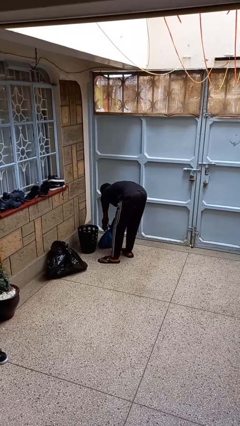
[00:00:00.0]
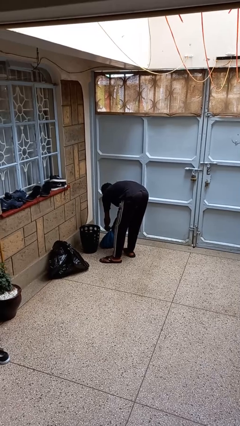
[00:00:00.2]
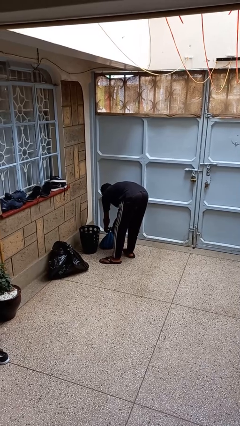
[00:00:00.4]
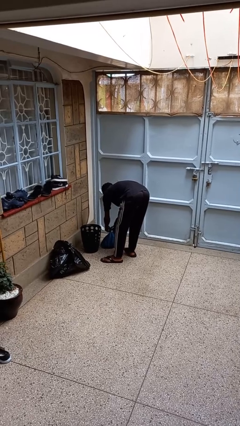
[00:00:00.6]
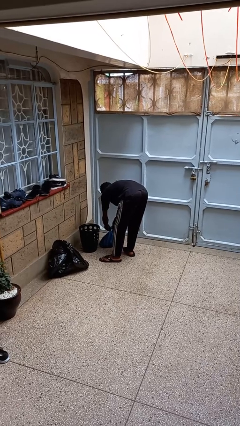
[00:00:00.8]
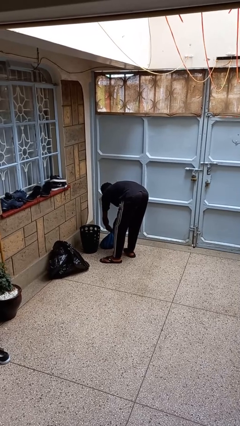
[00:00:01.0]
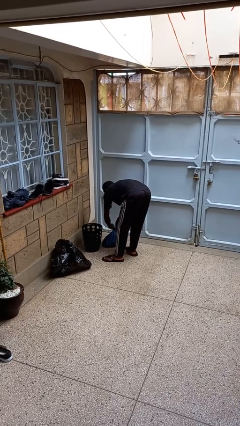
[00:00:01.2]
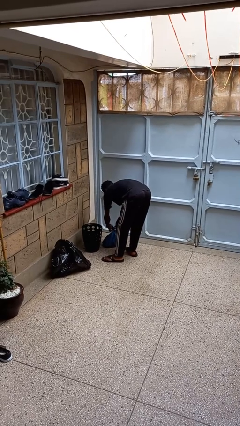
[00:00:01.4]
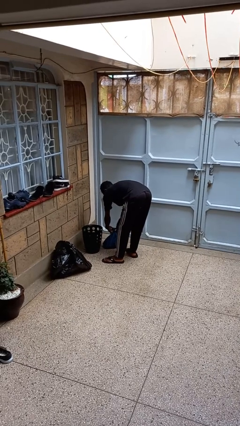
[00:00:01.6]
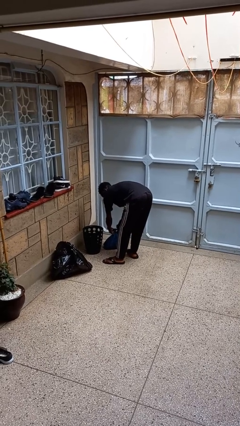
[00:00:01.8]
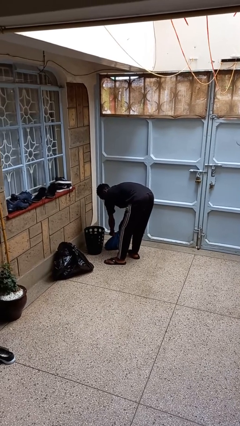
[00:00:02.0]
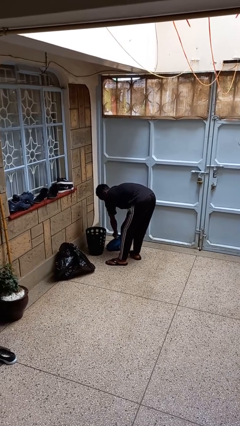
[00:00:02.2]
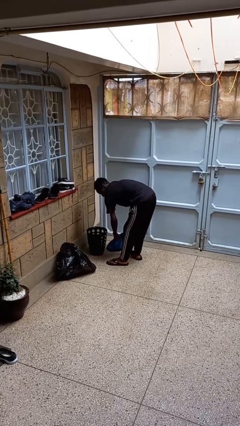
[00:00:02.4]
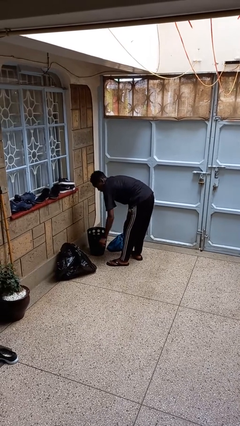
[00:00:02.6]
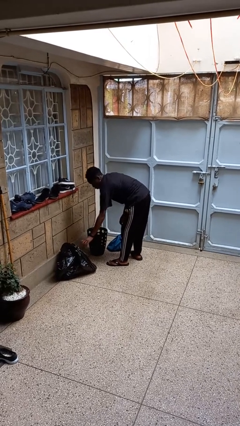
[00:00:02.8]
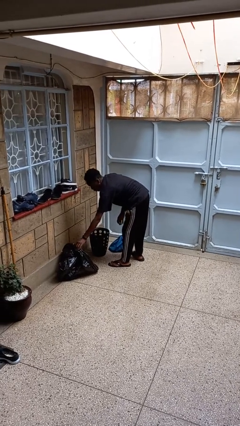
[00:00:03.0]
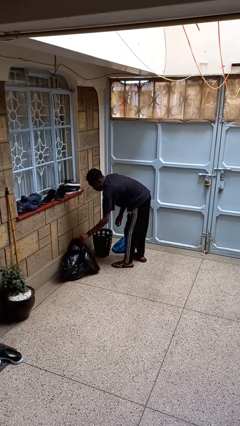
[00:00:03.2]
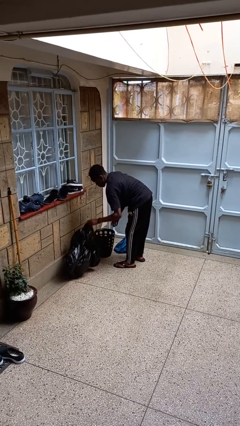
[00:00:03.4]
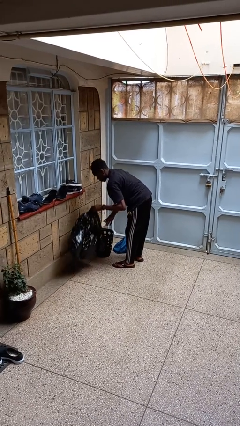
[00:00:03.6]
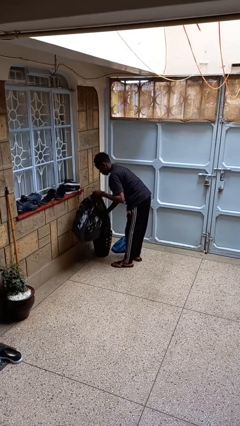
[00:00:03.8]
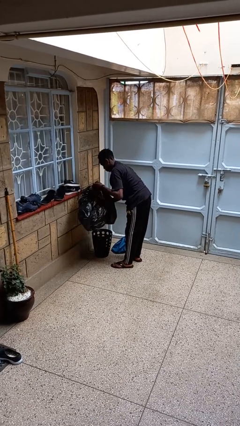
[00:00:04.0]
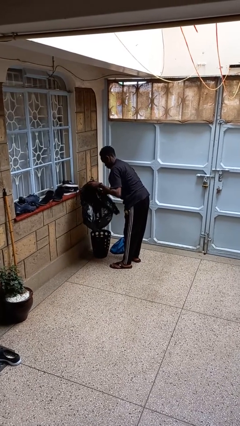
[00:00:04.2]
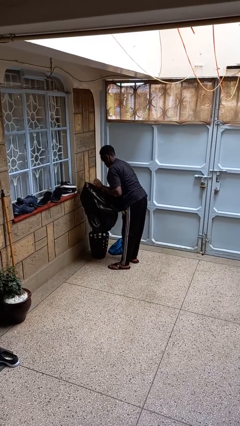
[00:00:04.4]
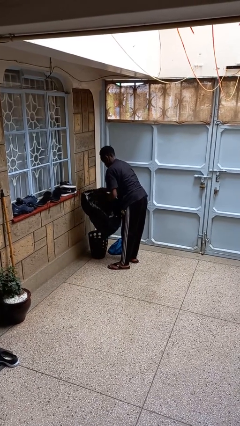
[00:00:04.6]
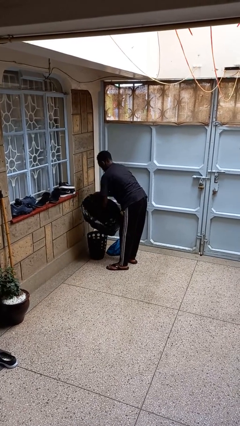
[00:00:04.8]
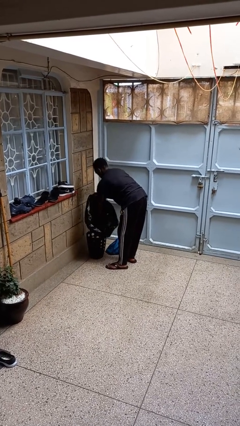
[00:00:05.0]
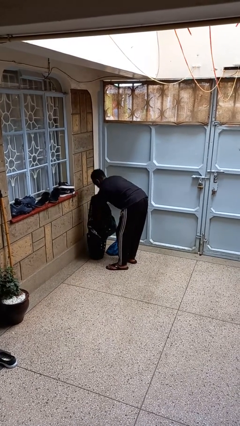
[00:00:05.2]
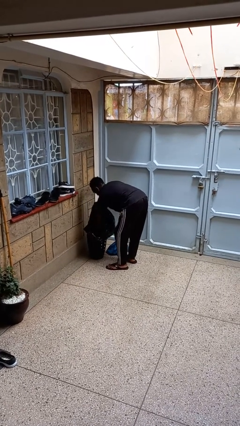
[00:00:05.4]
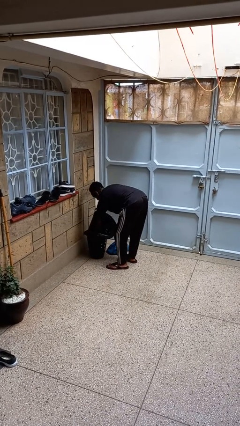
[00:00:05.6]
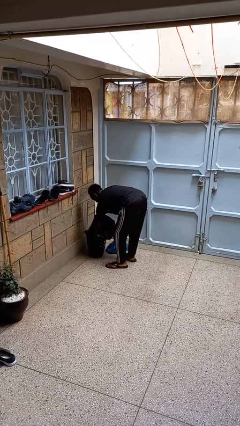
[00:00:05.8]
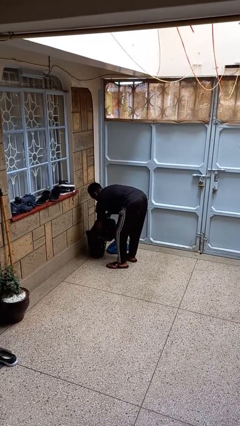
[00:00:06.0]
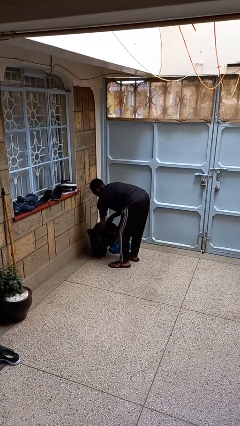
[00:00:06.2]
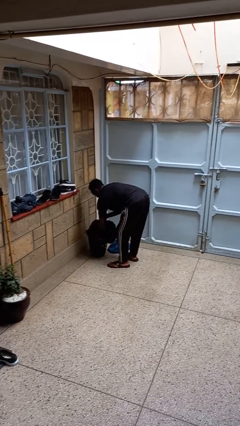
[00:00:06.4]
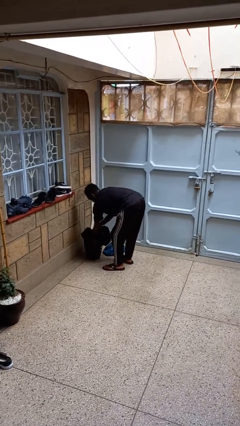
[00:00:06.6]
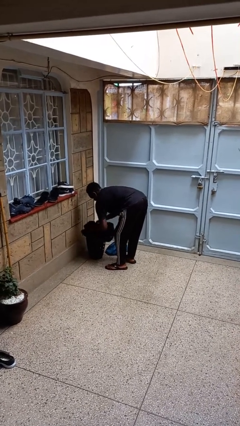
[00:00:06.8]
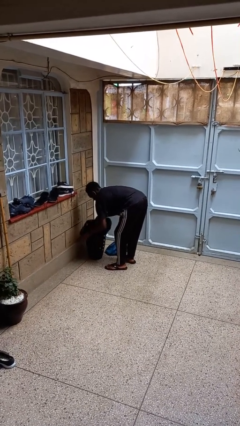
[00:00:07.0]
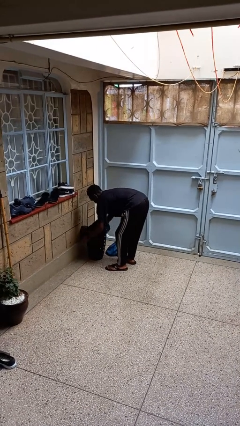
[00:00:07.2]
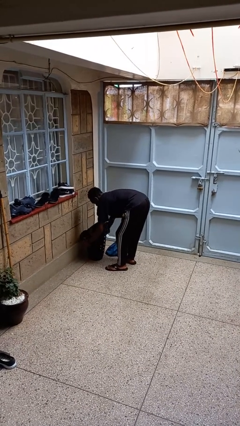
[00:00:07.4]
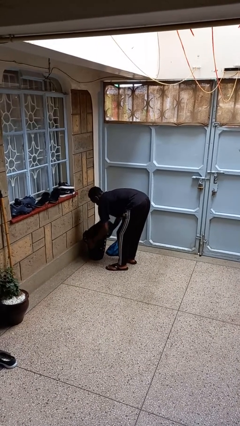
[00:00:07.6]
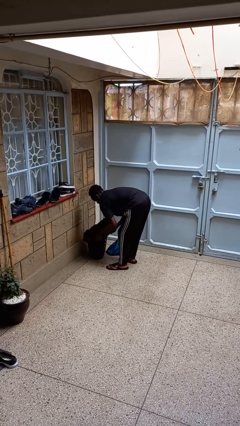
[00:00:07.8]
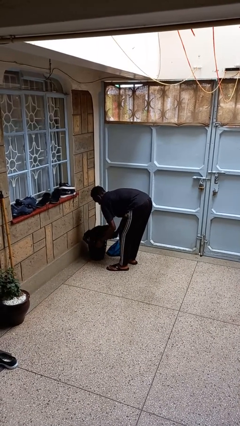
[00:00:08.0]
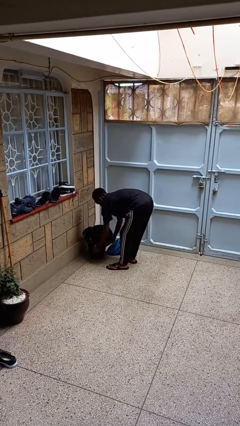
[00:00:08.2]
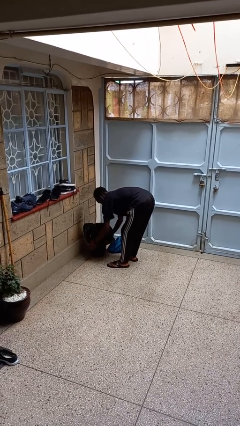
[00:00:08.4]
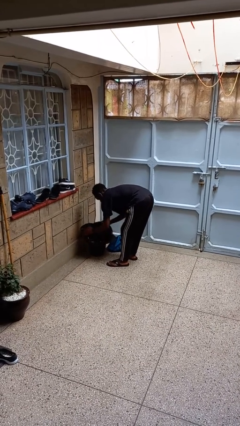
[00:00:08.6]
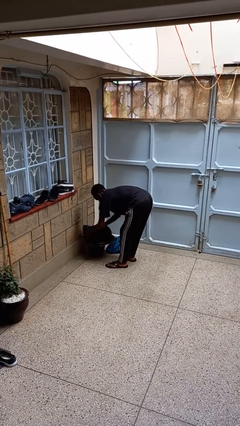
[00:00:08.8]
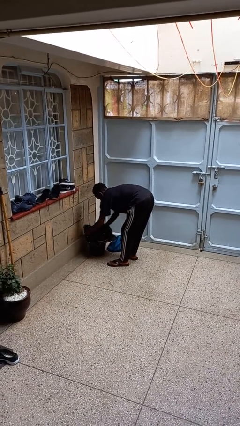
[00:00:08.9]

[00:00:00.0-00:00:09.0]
person inserts trashbag into trashcan

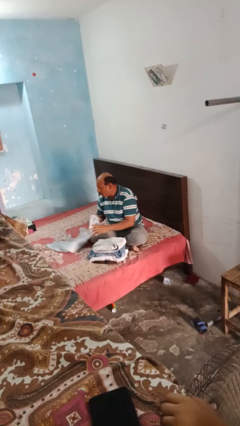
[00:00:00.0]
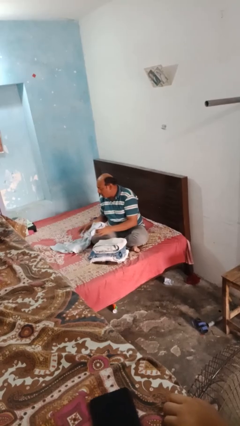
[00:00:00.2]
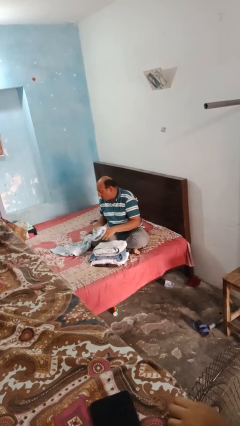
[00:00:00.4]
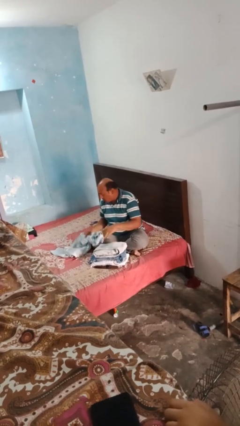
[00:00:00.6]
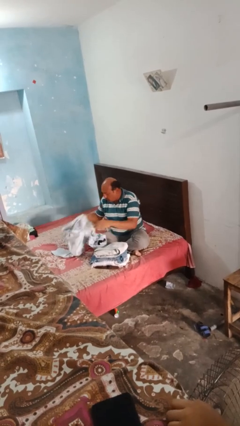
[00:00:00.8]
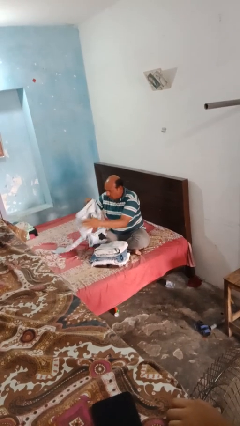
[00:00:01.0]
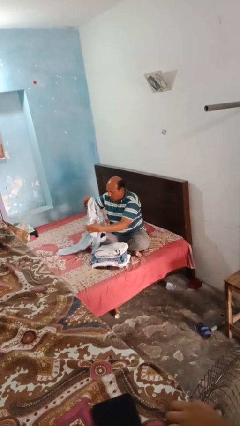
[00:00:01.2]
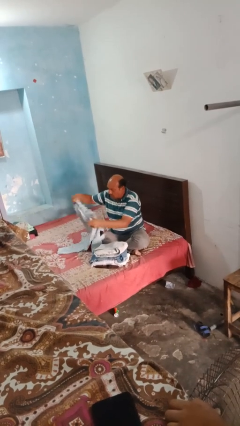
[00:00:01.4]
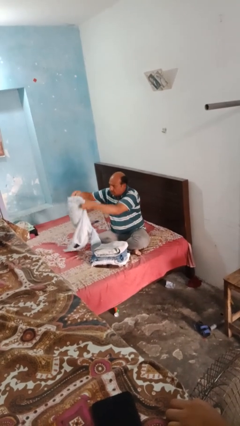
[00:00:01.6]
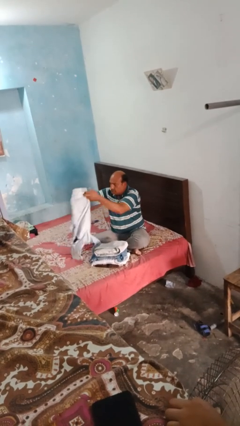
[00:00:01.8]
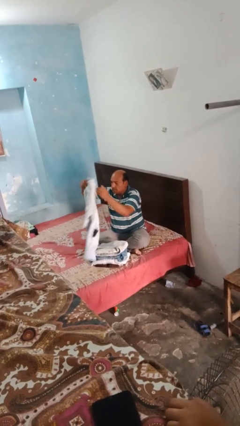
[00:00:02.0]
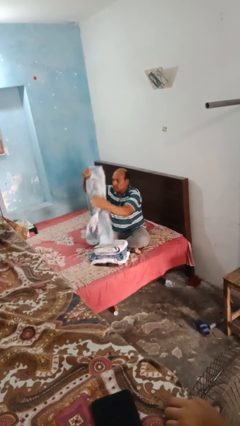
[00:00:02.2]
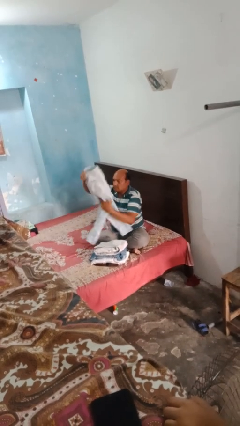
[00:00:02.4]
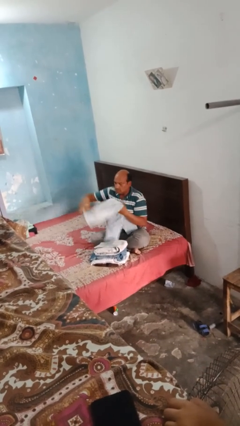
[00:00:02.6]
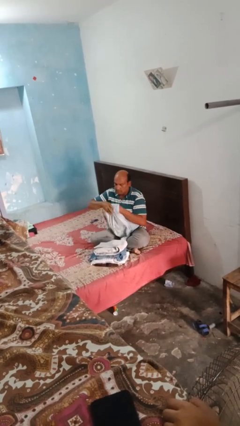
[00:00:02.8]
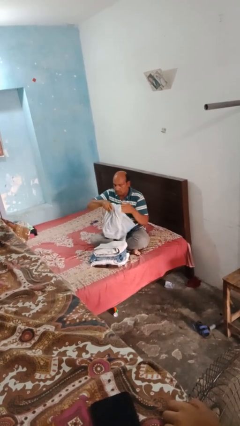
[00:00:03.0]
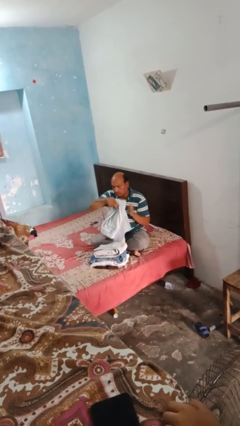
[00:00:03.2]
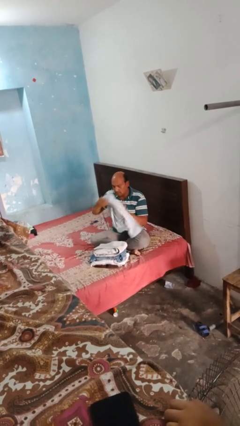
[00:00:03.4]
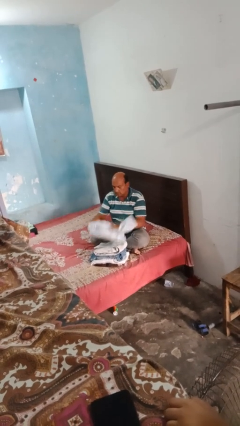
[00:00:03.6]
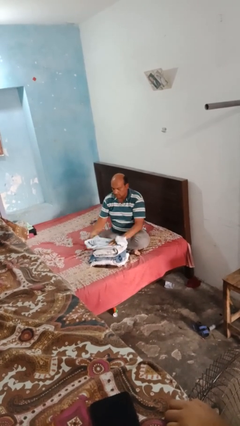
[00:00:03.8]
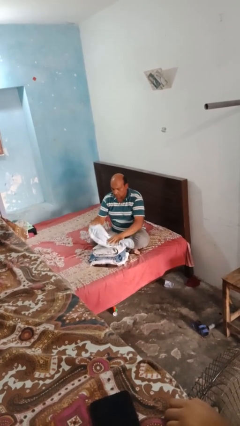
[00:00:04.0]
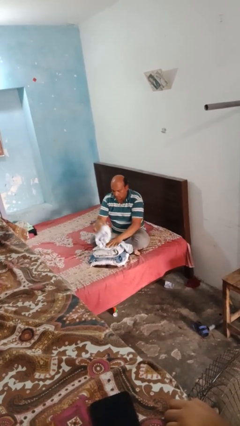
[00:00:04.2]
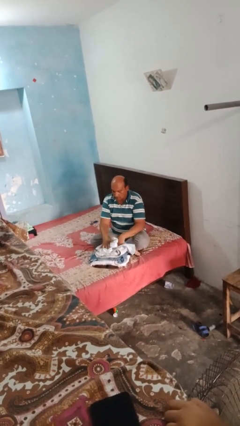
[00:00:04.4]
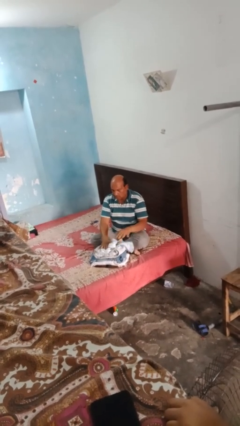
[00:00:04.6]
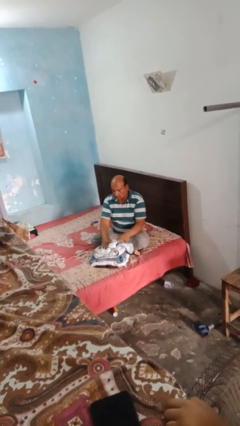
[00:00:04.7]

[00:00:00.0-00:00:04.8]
person folds pants

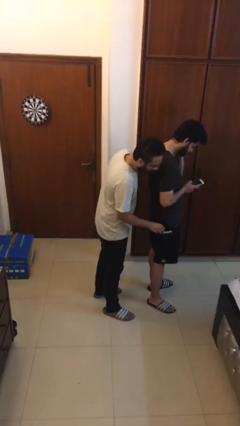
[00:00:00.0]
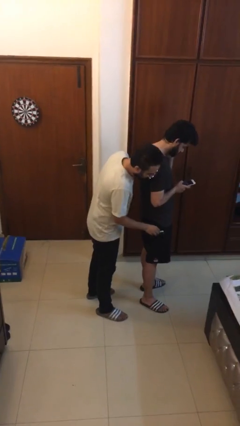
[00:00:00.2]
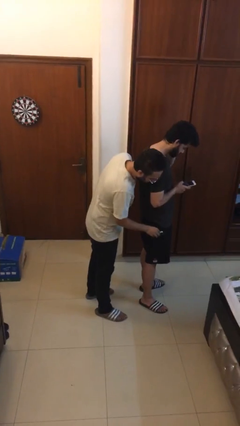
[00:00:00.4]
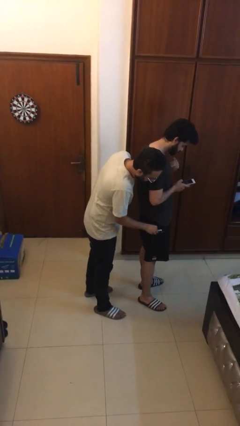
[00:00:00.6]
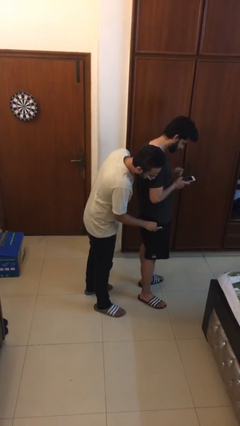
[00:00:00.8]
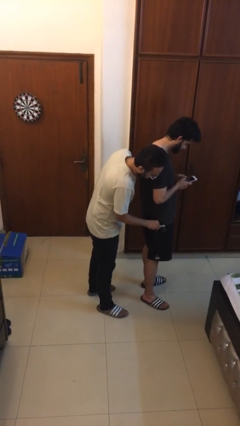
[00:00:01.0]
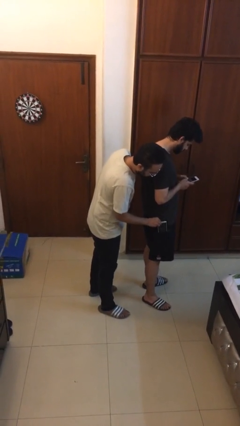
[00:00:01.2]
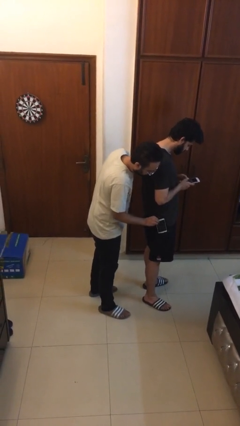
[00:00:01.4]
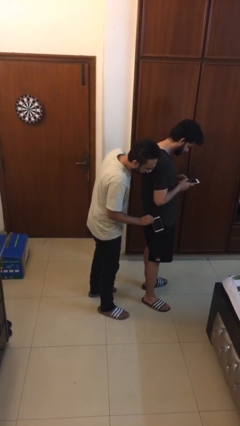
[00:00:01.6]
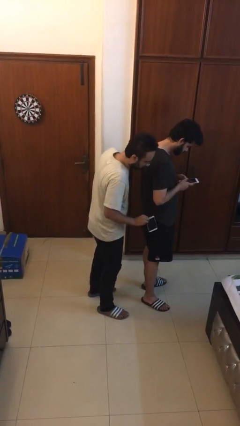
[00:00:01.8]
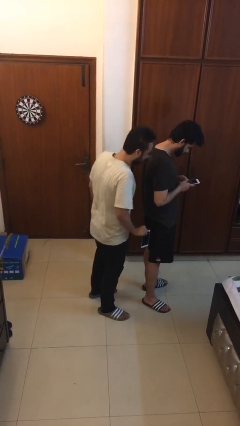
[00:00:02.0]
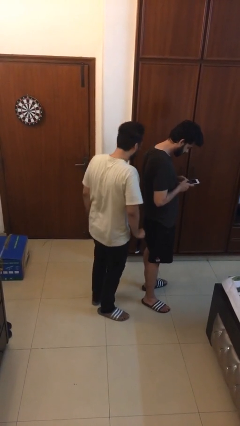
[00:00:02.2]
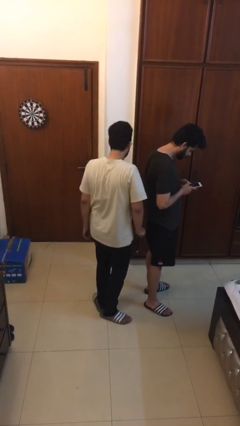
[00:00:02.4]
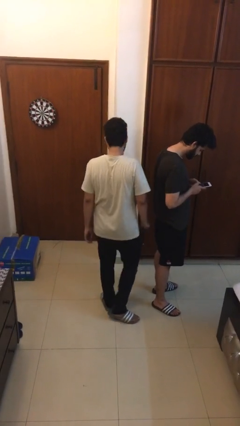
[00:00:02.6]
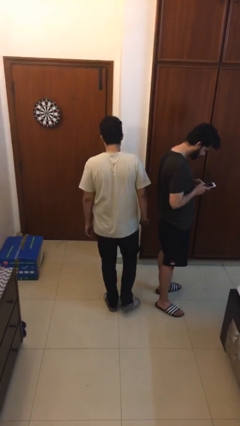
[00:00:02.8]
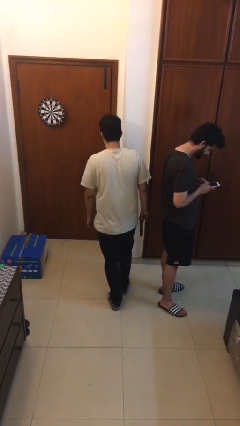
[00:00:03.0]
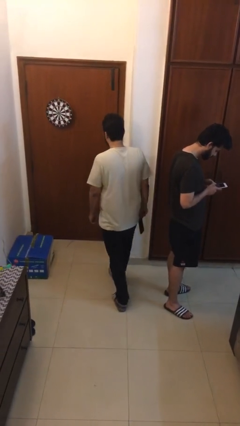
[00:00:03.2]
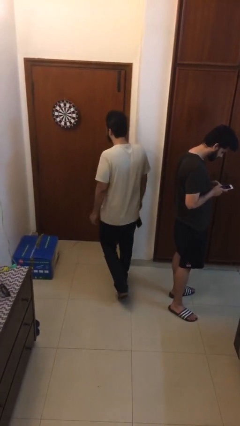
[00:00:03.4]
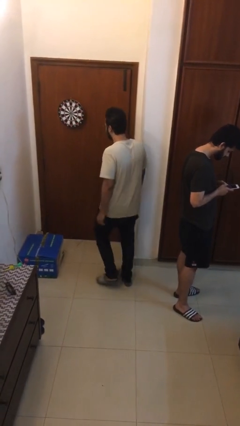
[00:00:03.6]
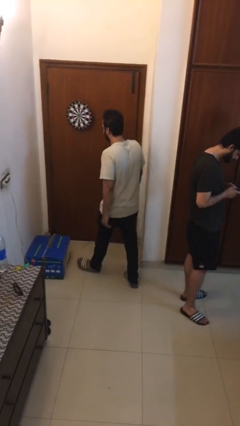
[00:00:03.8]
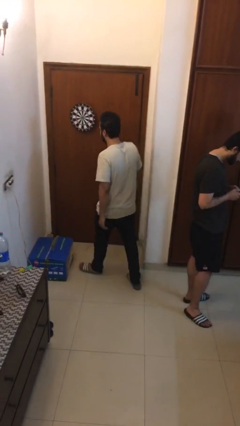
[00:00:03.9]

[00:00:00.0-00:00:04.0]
person steals object from person
